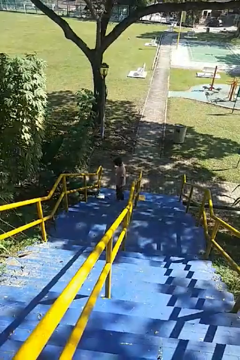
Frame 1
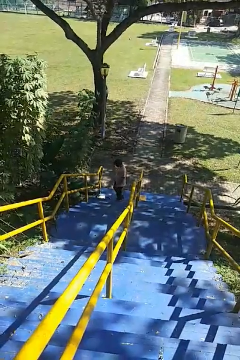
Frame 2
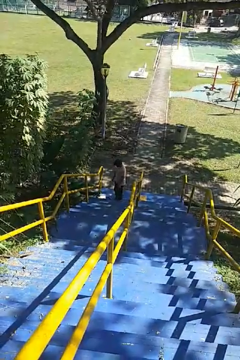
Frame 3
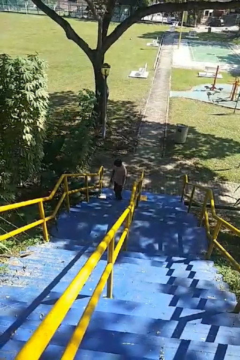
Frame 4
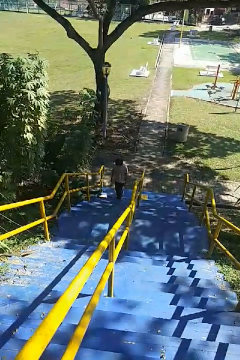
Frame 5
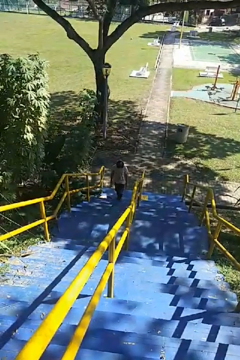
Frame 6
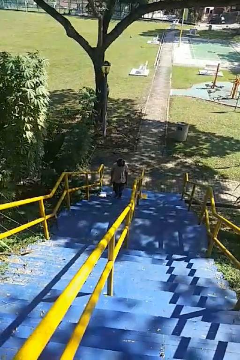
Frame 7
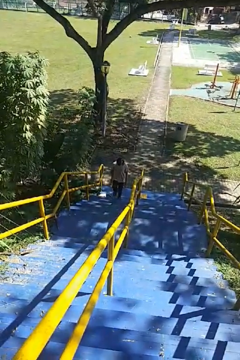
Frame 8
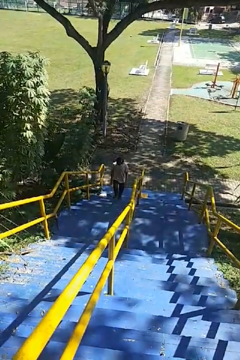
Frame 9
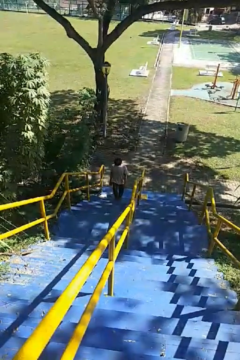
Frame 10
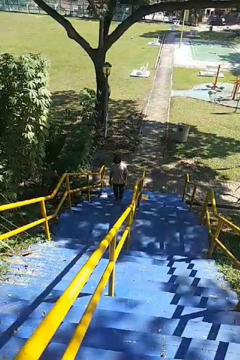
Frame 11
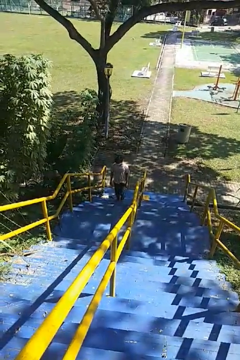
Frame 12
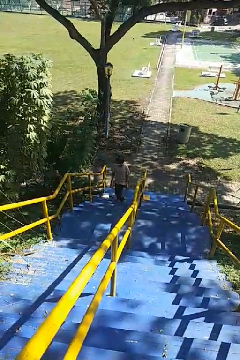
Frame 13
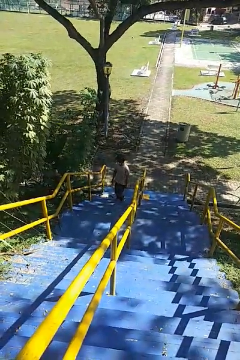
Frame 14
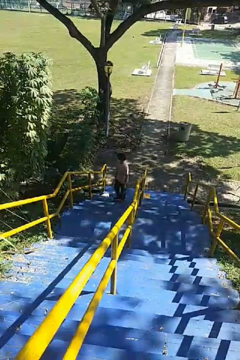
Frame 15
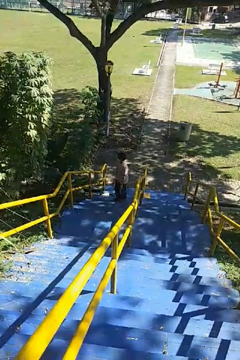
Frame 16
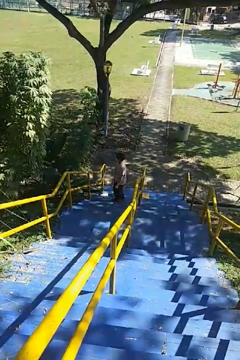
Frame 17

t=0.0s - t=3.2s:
person climbs up stairs

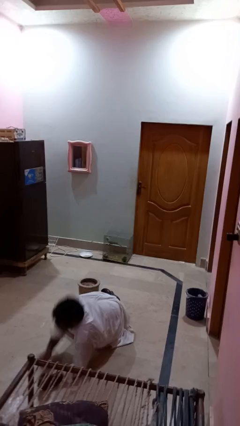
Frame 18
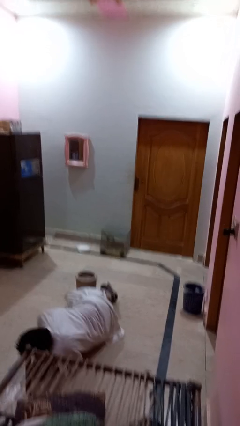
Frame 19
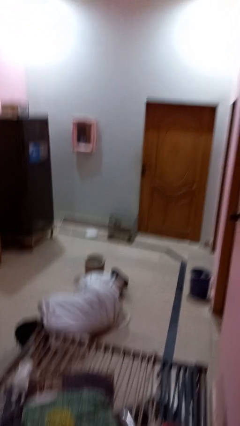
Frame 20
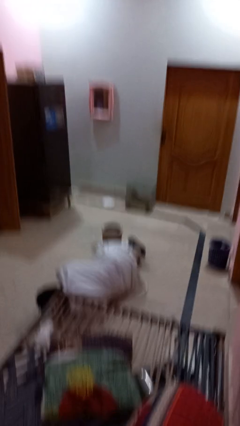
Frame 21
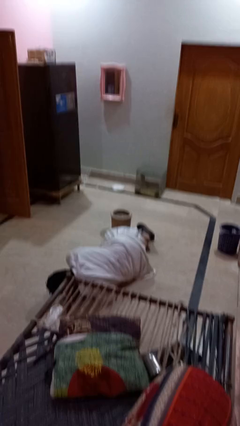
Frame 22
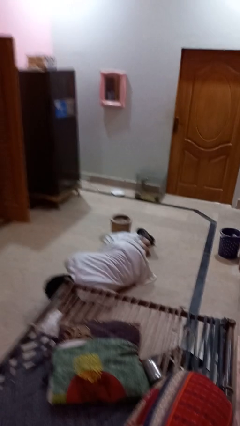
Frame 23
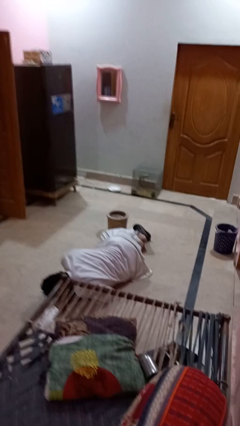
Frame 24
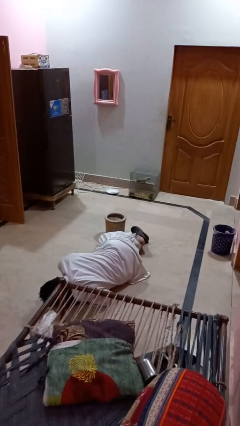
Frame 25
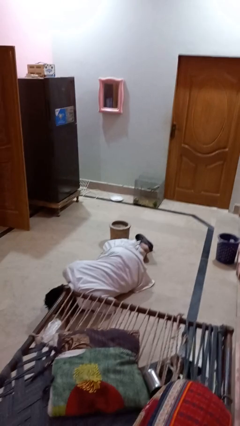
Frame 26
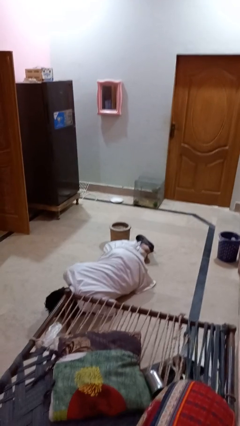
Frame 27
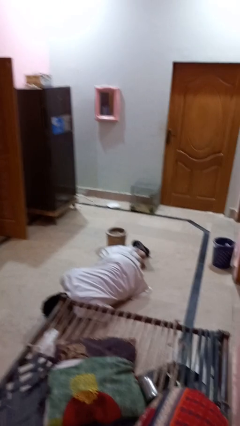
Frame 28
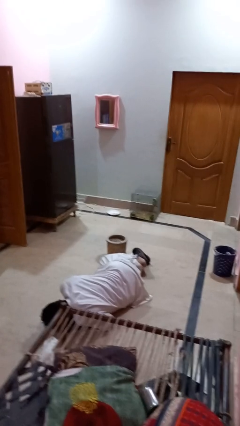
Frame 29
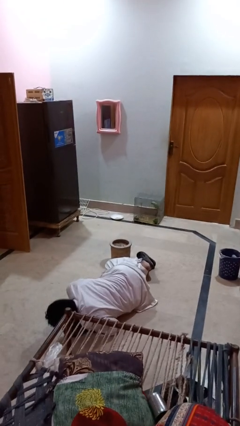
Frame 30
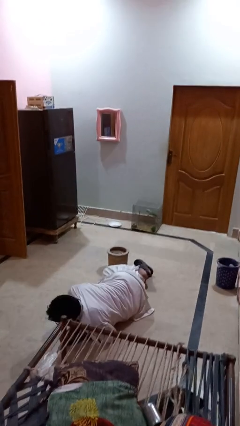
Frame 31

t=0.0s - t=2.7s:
person lies down on floor

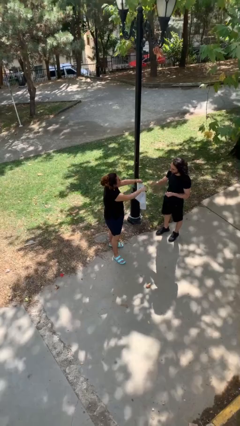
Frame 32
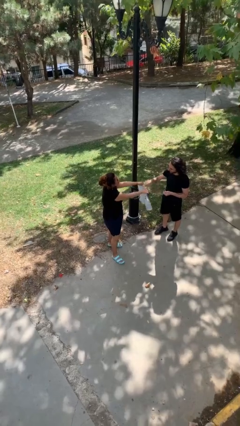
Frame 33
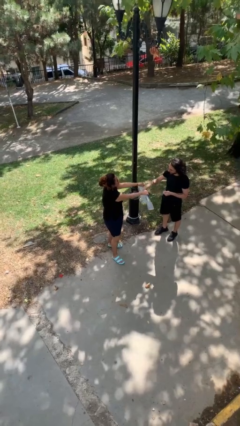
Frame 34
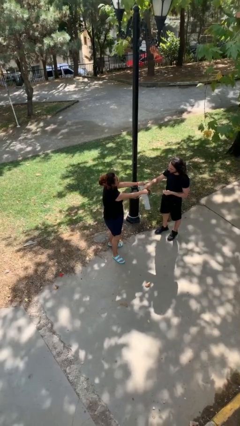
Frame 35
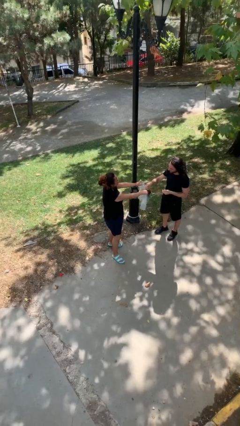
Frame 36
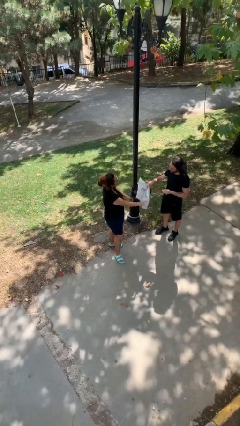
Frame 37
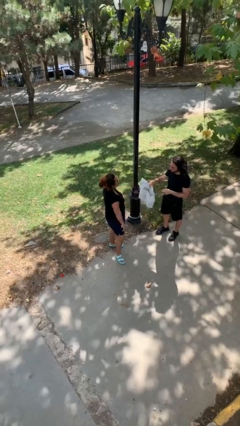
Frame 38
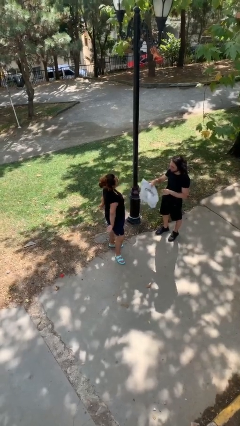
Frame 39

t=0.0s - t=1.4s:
person transfers object to person
